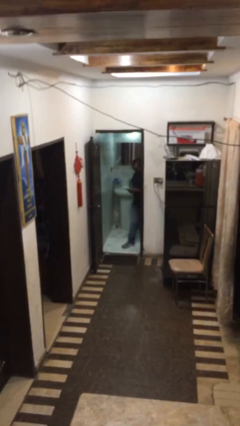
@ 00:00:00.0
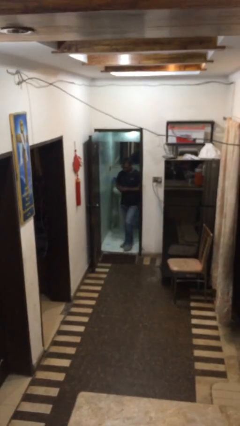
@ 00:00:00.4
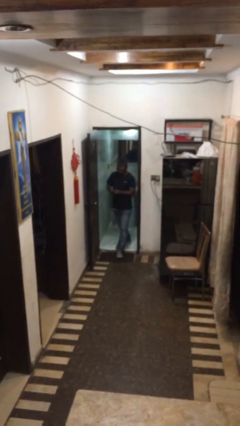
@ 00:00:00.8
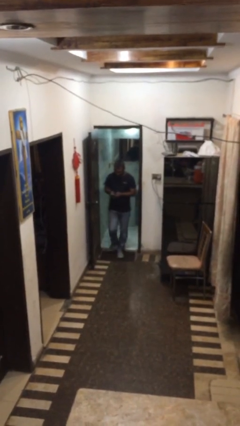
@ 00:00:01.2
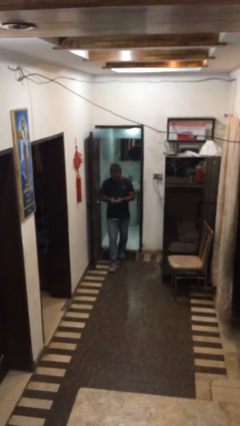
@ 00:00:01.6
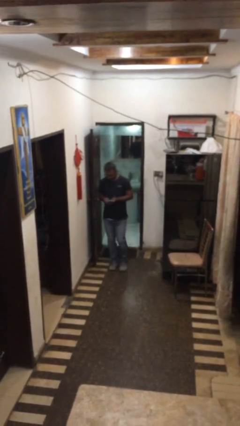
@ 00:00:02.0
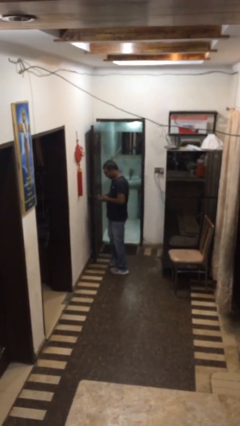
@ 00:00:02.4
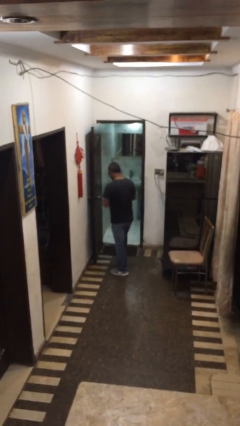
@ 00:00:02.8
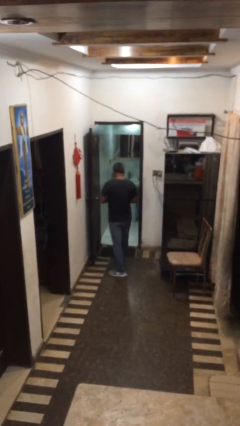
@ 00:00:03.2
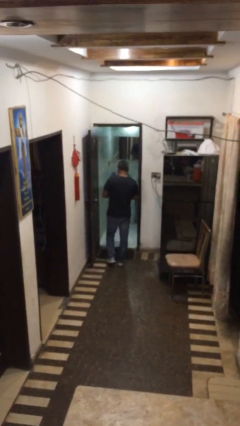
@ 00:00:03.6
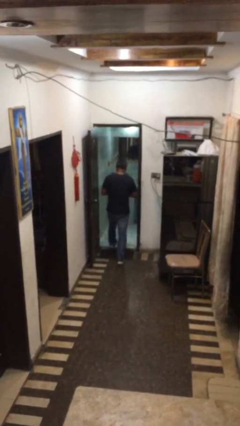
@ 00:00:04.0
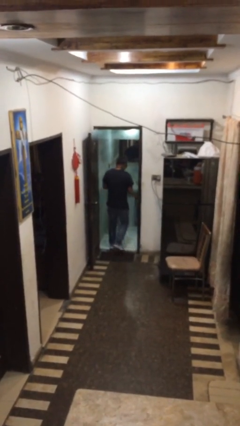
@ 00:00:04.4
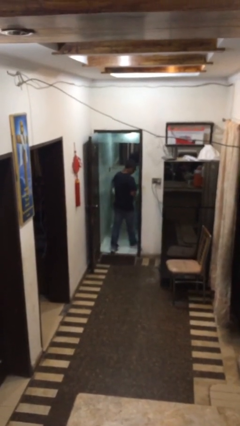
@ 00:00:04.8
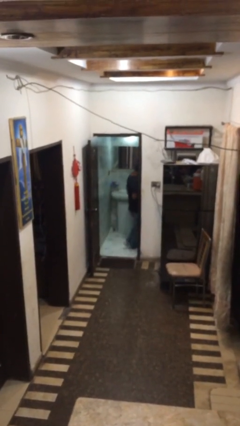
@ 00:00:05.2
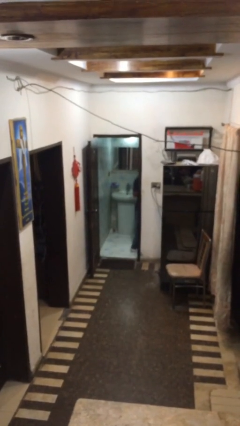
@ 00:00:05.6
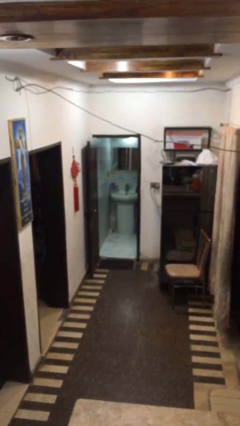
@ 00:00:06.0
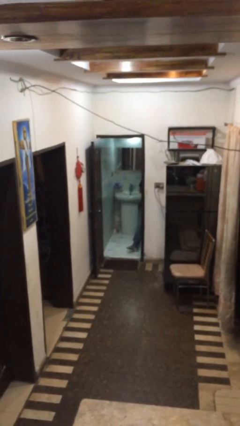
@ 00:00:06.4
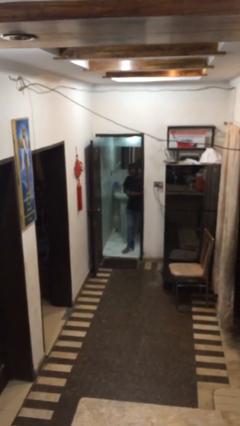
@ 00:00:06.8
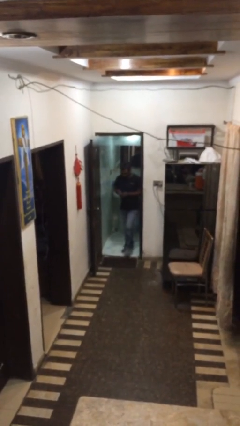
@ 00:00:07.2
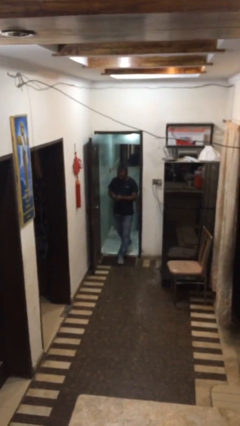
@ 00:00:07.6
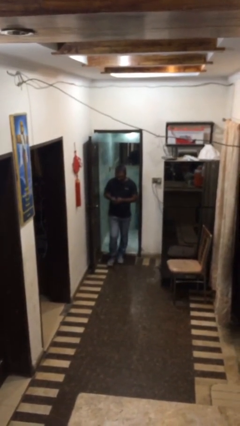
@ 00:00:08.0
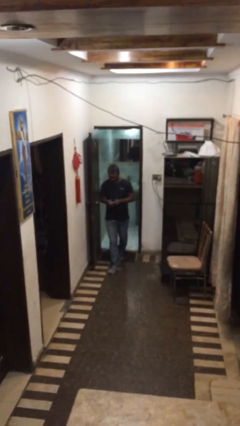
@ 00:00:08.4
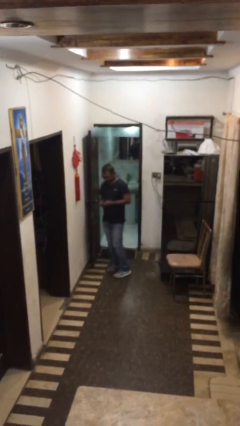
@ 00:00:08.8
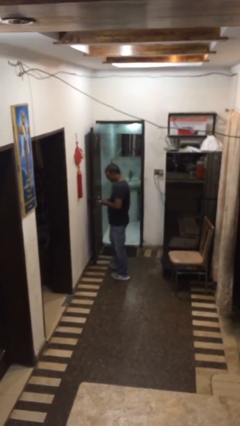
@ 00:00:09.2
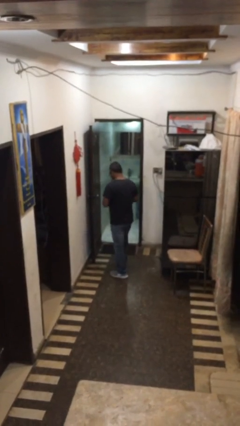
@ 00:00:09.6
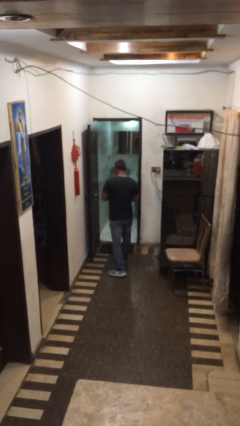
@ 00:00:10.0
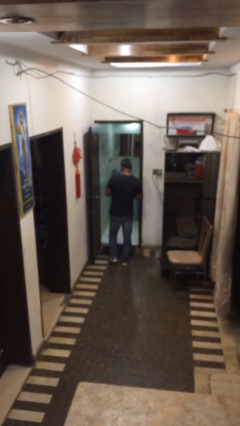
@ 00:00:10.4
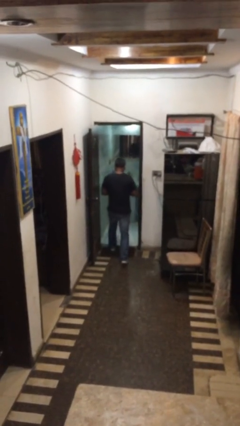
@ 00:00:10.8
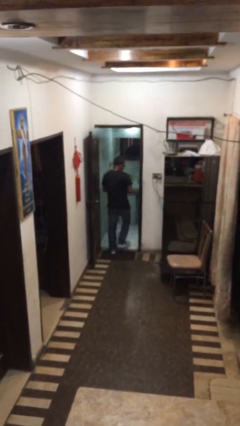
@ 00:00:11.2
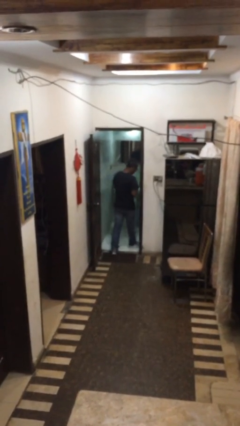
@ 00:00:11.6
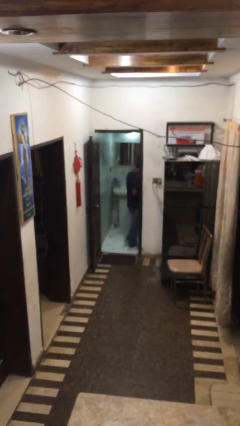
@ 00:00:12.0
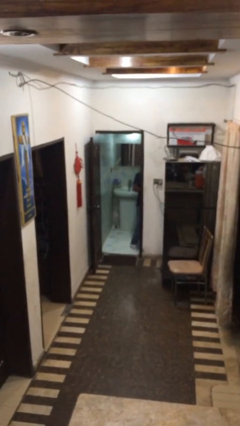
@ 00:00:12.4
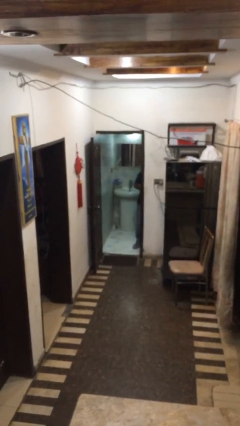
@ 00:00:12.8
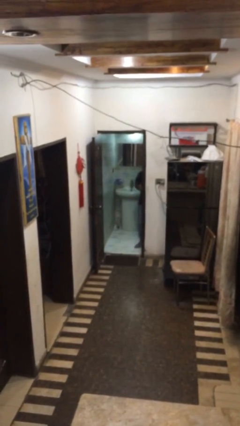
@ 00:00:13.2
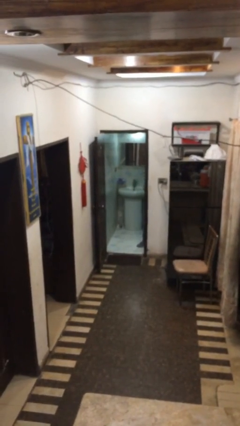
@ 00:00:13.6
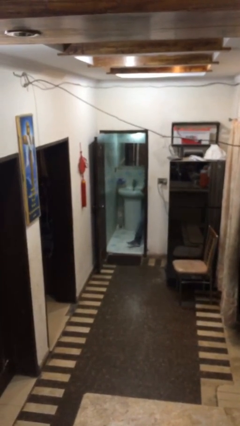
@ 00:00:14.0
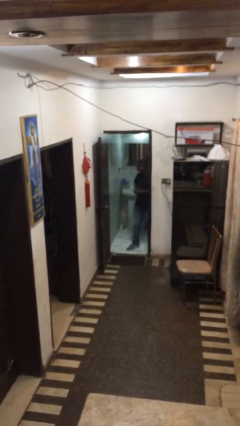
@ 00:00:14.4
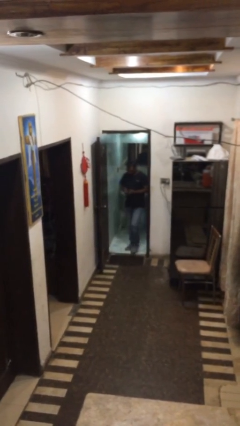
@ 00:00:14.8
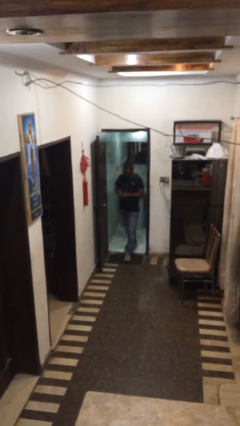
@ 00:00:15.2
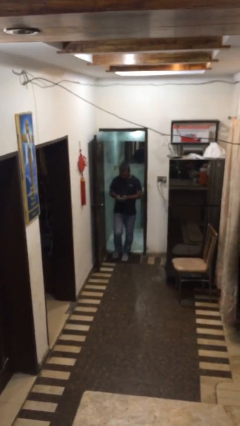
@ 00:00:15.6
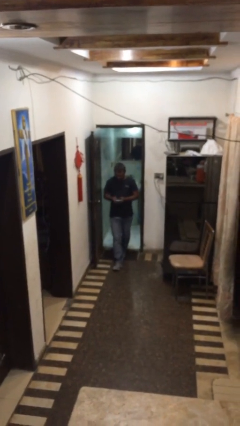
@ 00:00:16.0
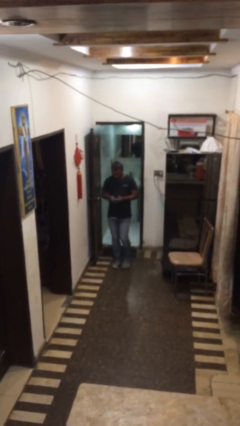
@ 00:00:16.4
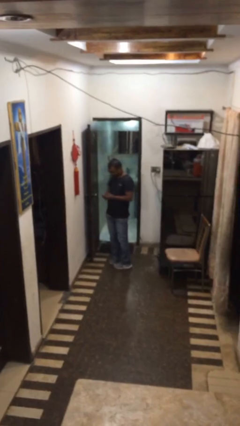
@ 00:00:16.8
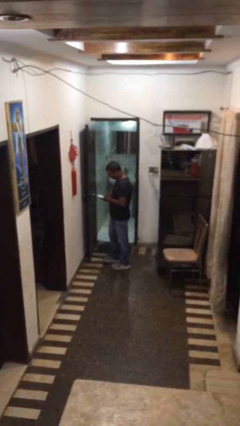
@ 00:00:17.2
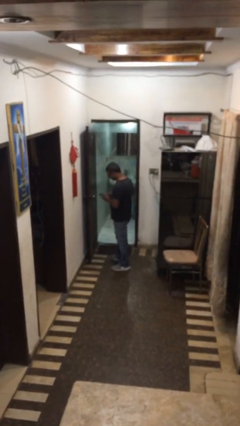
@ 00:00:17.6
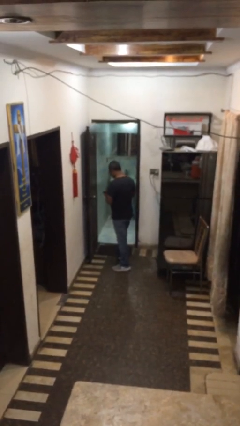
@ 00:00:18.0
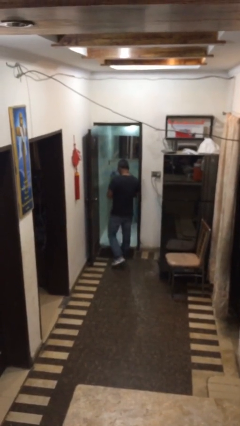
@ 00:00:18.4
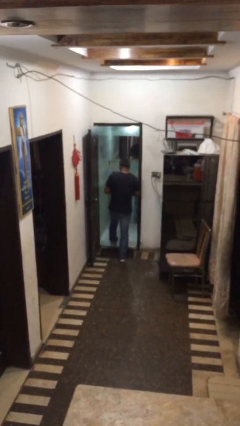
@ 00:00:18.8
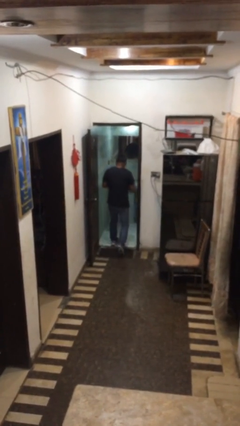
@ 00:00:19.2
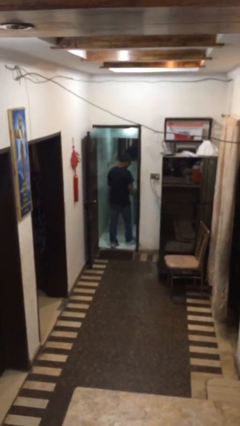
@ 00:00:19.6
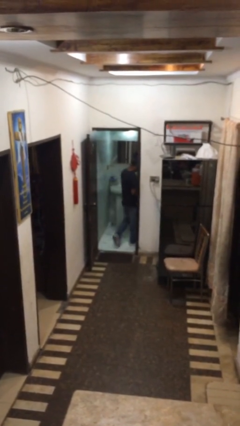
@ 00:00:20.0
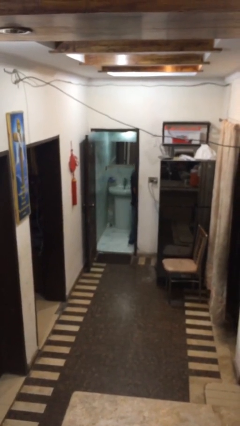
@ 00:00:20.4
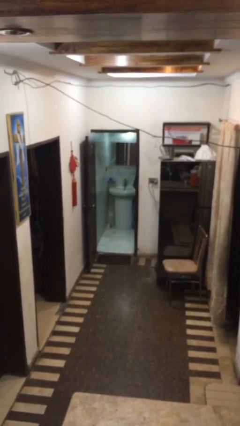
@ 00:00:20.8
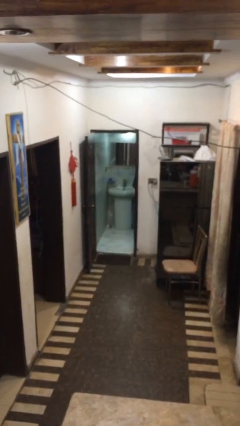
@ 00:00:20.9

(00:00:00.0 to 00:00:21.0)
person texts on phone

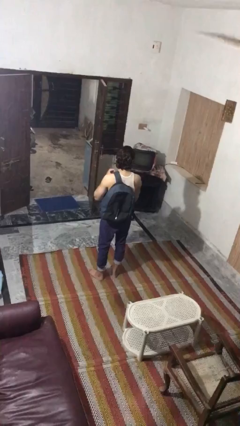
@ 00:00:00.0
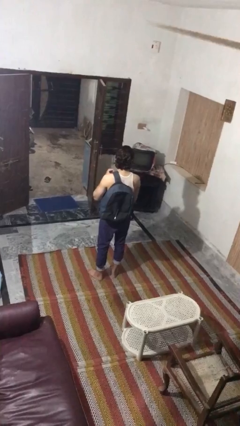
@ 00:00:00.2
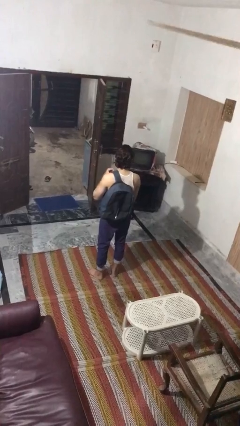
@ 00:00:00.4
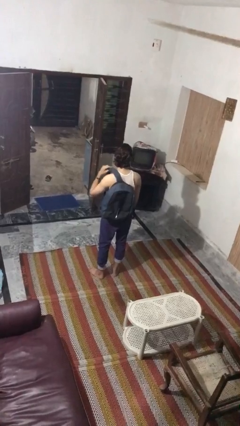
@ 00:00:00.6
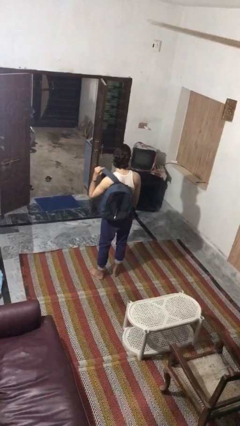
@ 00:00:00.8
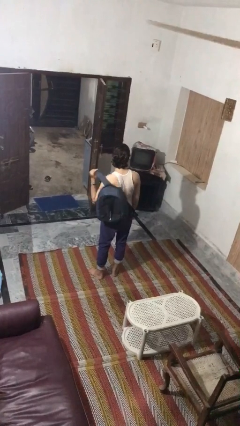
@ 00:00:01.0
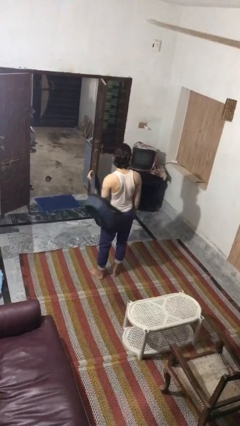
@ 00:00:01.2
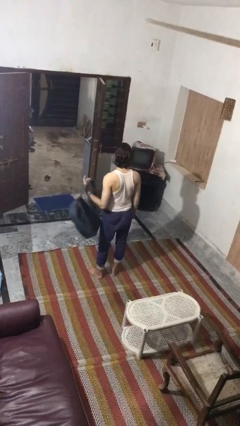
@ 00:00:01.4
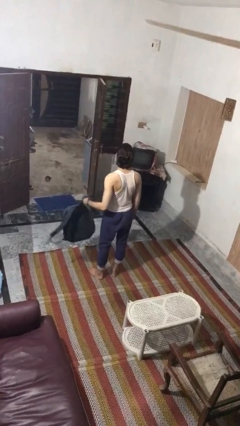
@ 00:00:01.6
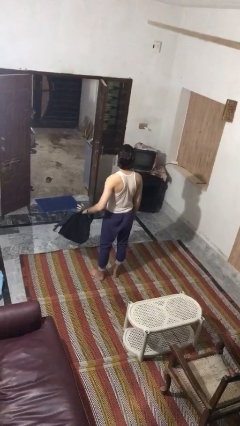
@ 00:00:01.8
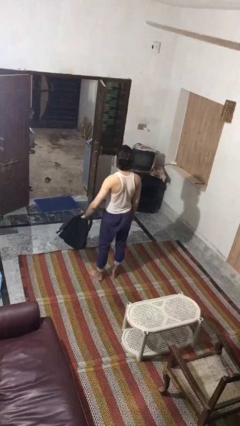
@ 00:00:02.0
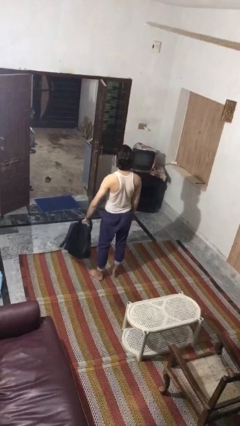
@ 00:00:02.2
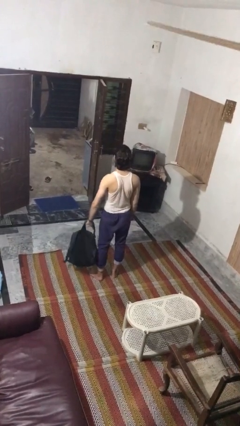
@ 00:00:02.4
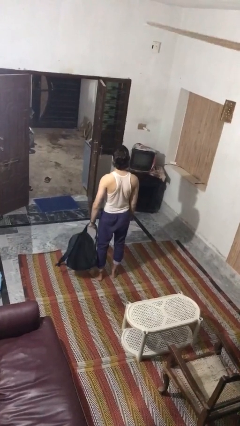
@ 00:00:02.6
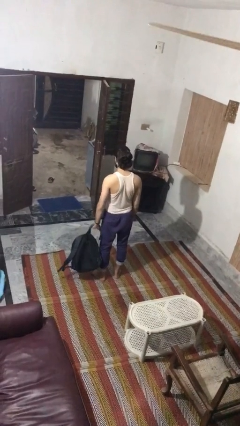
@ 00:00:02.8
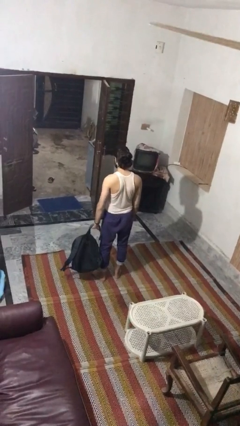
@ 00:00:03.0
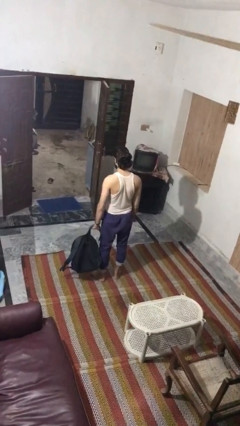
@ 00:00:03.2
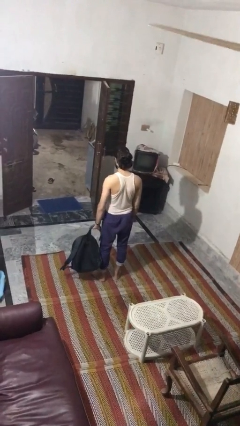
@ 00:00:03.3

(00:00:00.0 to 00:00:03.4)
person takes off backpack

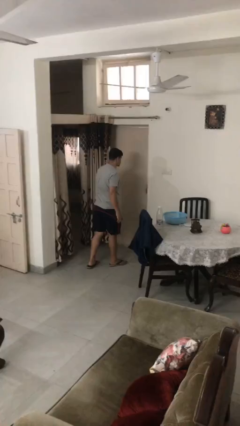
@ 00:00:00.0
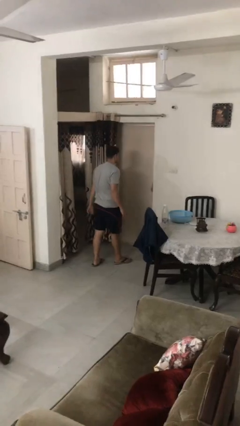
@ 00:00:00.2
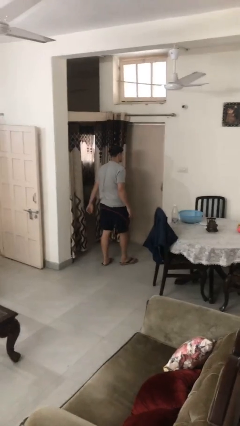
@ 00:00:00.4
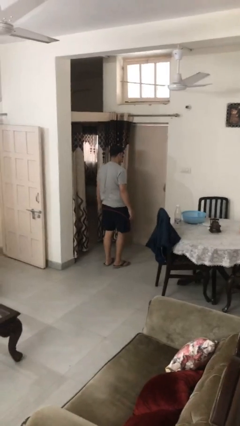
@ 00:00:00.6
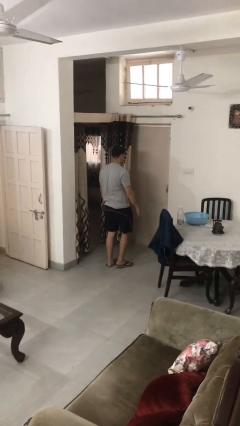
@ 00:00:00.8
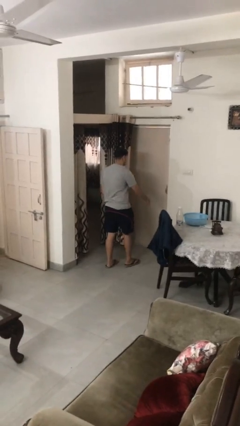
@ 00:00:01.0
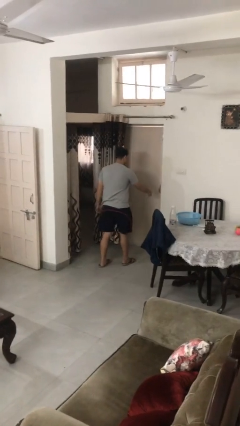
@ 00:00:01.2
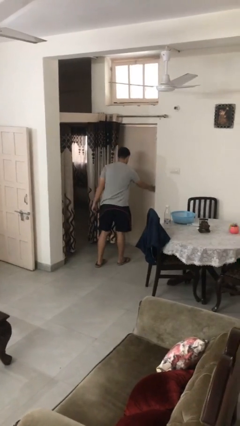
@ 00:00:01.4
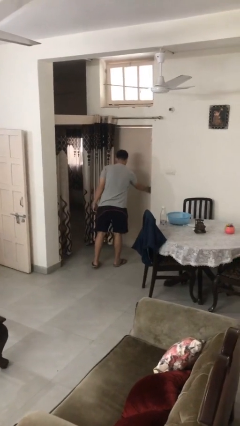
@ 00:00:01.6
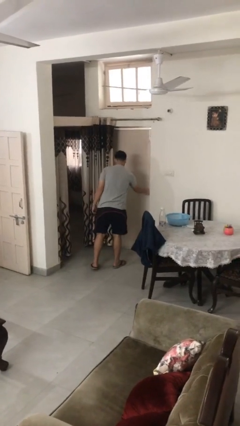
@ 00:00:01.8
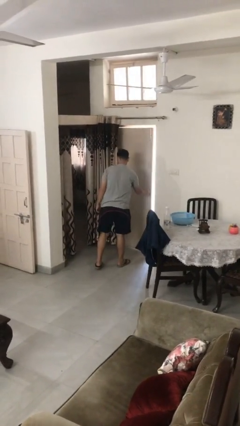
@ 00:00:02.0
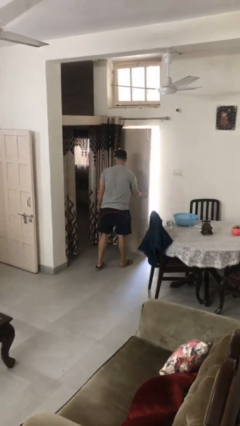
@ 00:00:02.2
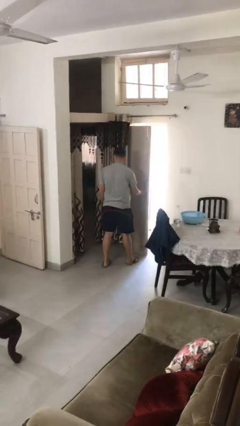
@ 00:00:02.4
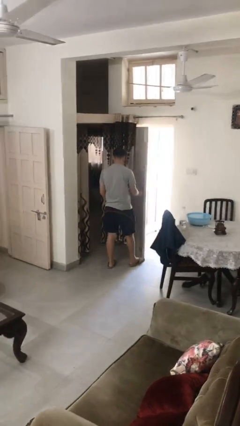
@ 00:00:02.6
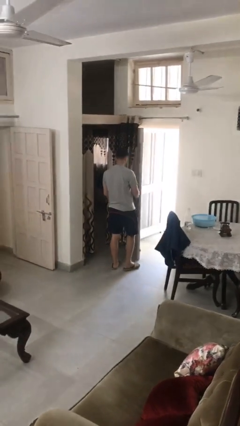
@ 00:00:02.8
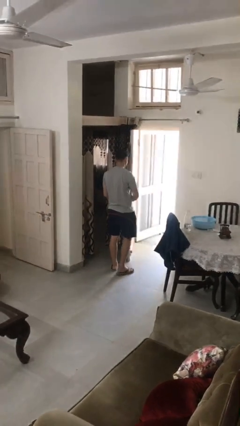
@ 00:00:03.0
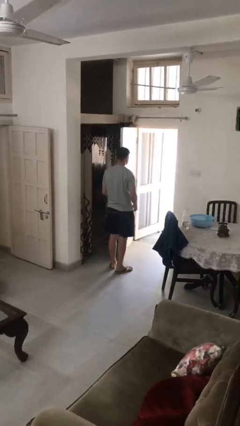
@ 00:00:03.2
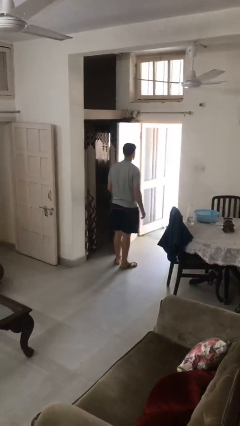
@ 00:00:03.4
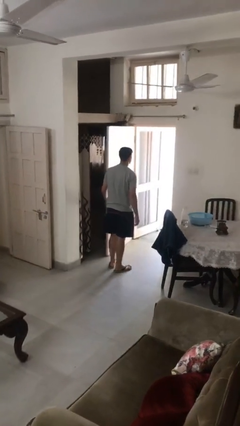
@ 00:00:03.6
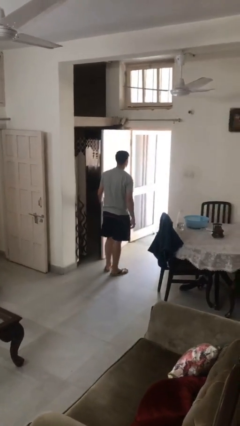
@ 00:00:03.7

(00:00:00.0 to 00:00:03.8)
person opens facility door
